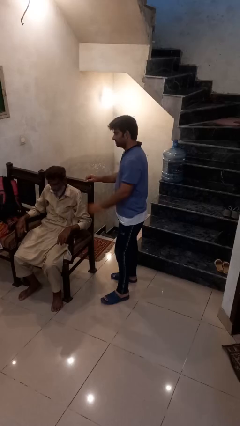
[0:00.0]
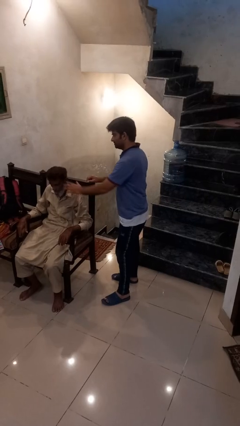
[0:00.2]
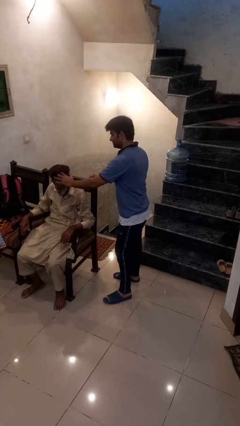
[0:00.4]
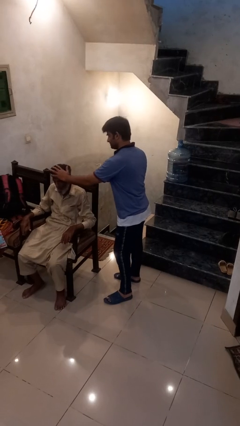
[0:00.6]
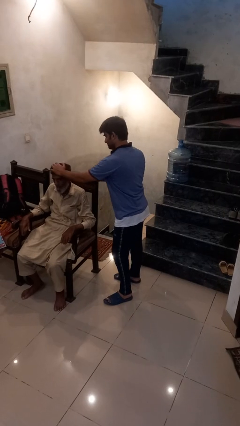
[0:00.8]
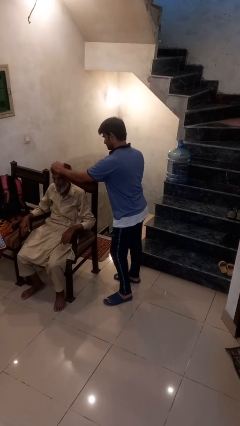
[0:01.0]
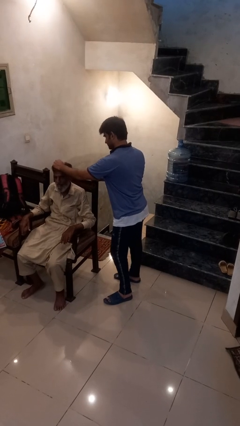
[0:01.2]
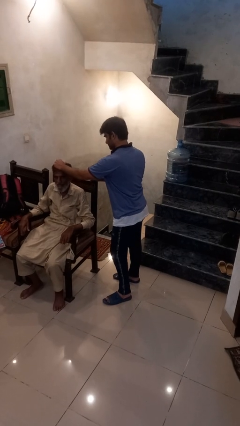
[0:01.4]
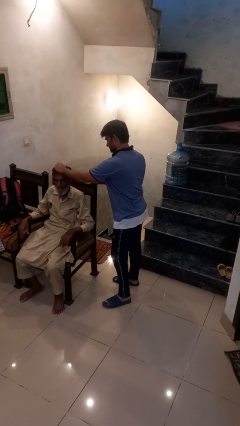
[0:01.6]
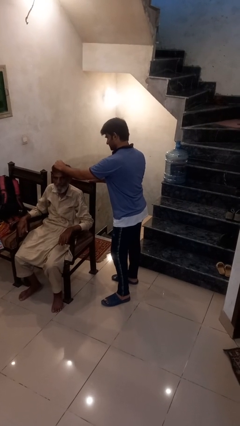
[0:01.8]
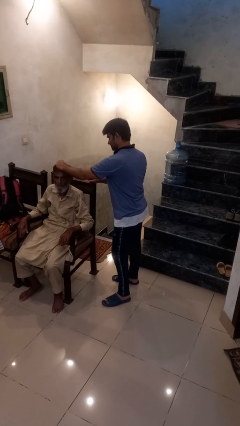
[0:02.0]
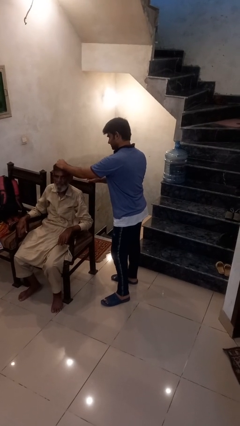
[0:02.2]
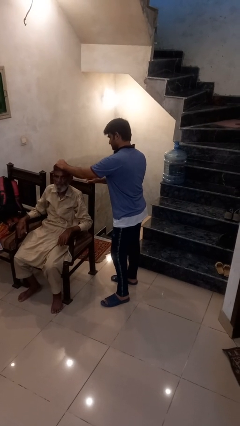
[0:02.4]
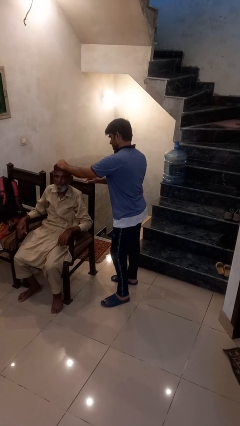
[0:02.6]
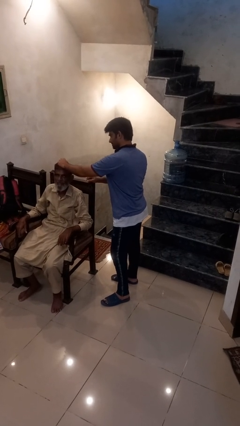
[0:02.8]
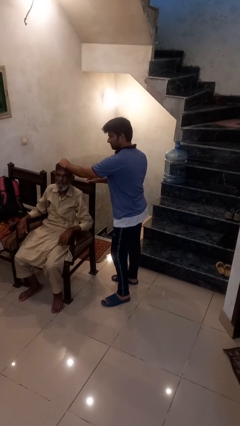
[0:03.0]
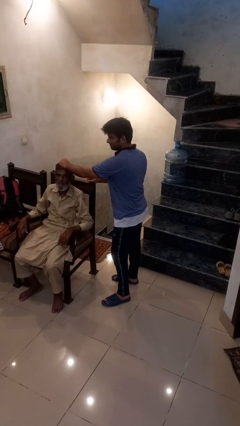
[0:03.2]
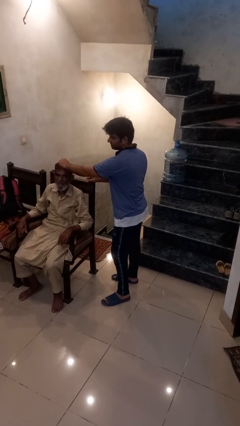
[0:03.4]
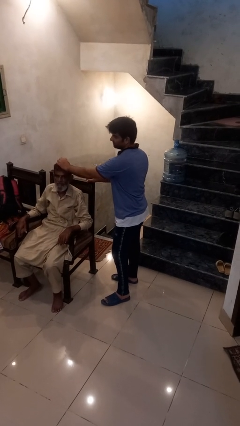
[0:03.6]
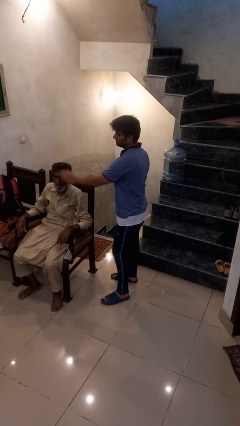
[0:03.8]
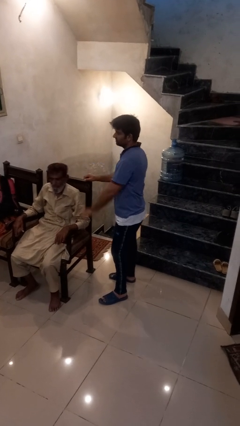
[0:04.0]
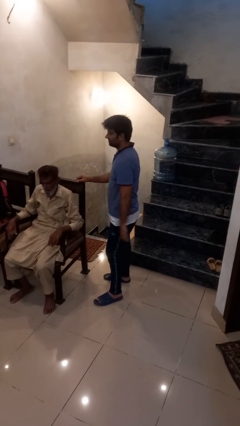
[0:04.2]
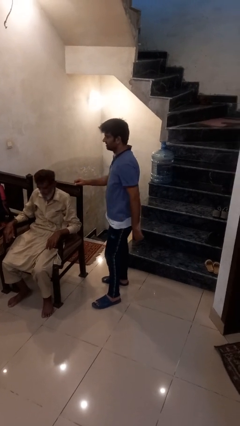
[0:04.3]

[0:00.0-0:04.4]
person grabs person by hair

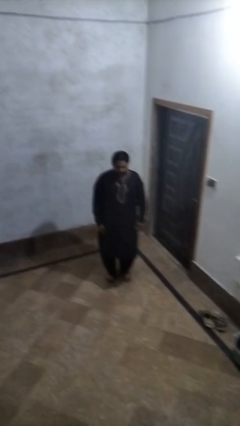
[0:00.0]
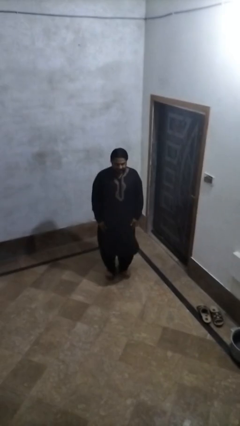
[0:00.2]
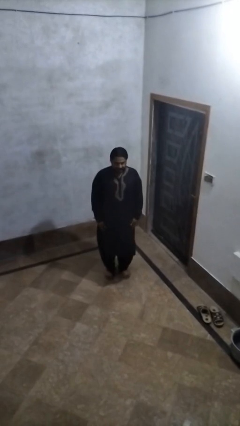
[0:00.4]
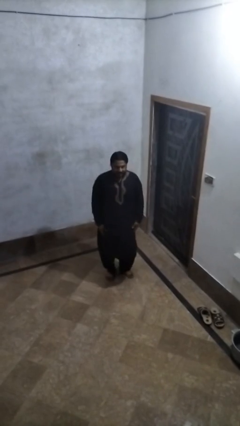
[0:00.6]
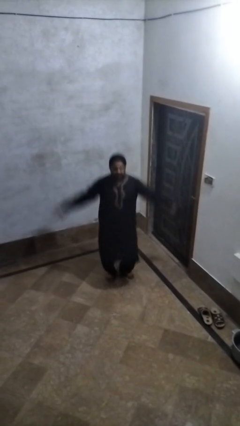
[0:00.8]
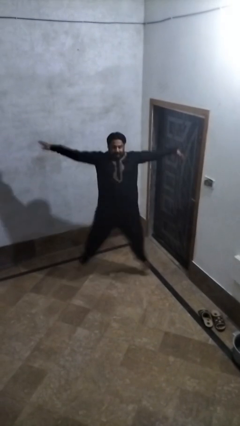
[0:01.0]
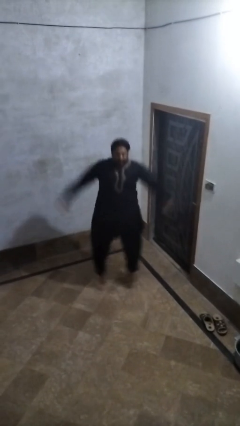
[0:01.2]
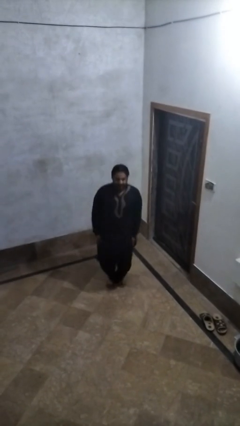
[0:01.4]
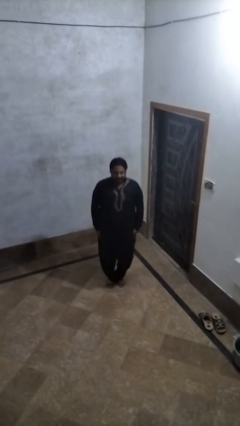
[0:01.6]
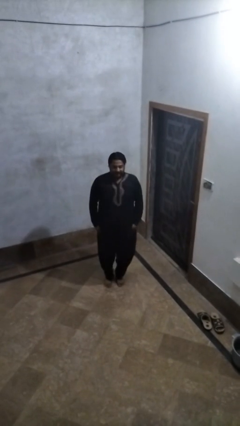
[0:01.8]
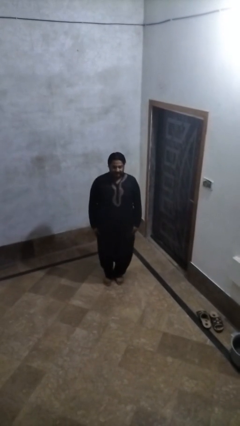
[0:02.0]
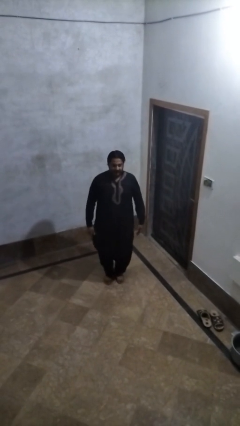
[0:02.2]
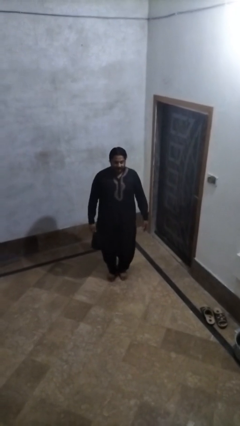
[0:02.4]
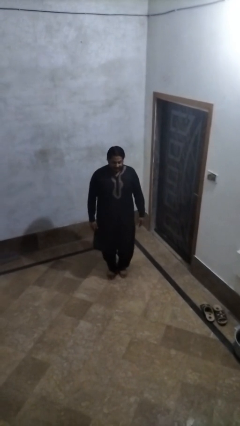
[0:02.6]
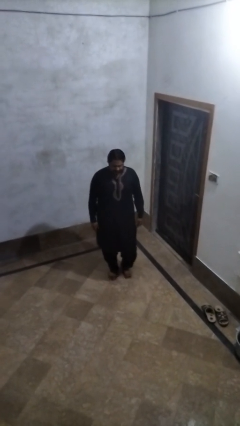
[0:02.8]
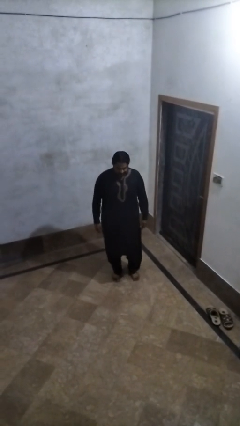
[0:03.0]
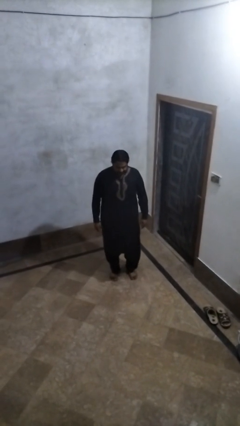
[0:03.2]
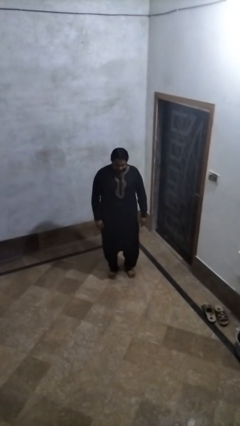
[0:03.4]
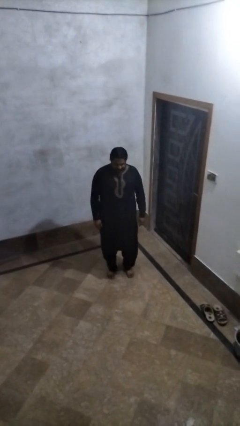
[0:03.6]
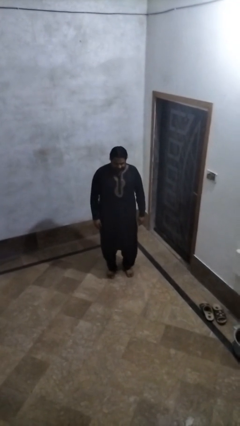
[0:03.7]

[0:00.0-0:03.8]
person exercises with jumping jacks

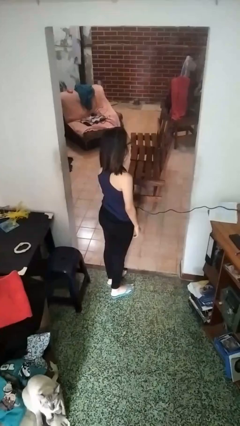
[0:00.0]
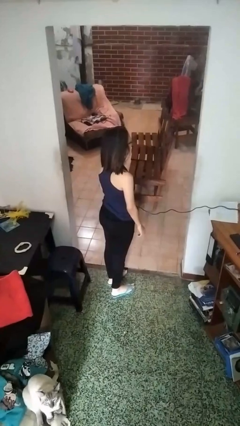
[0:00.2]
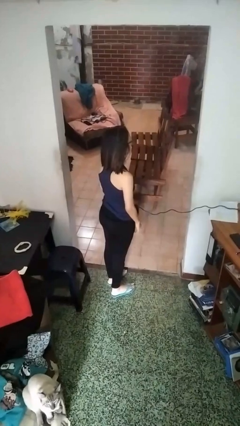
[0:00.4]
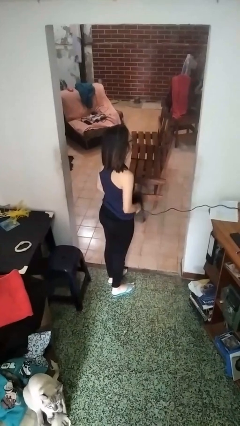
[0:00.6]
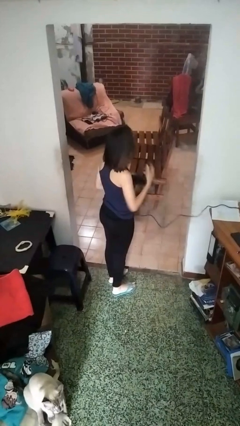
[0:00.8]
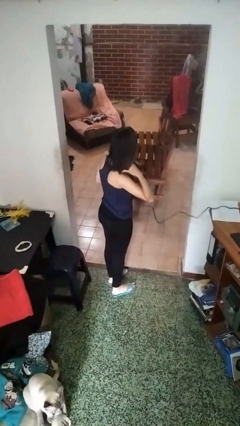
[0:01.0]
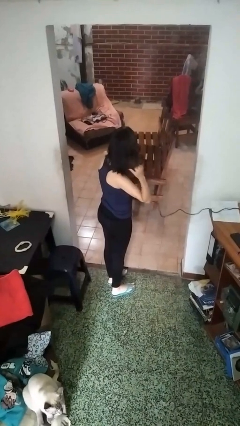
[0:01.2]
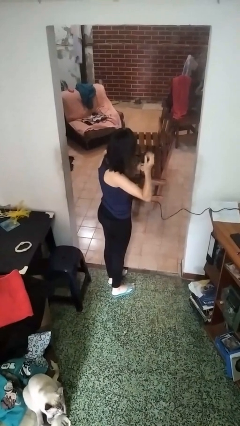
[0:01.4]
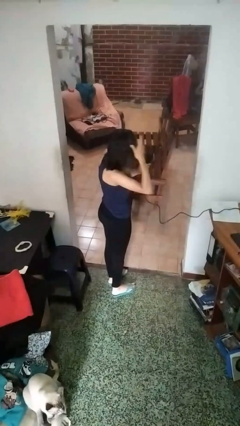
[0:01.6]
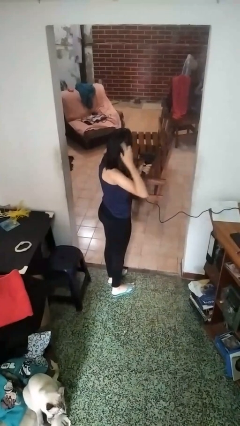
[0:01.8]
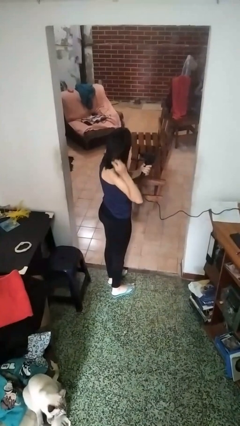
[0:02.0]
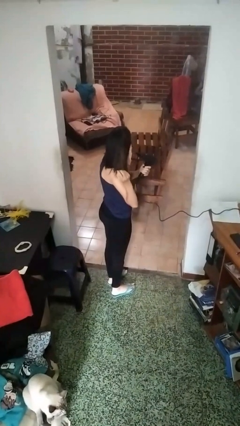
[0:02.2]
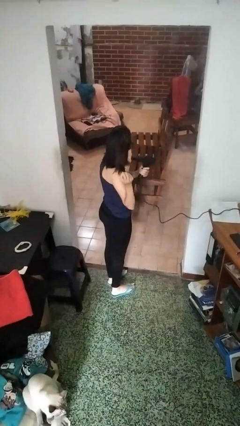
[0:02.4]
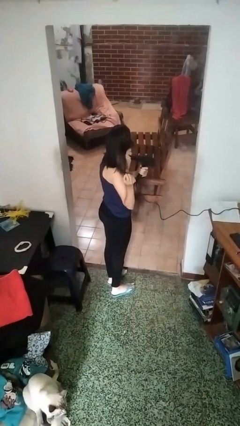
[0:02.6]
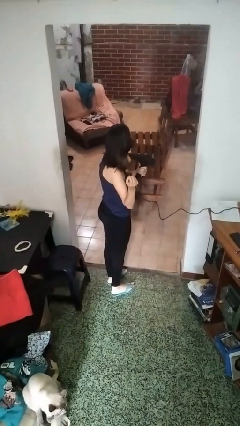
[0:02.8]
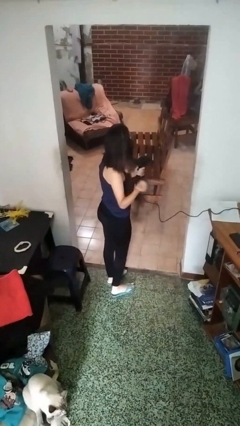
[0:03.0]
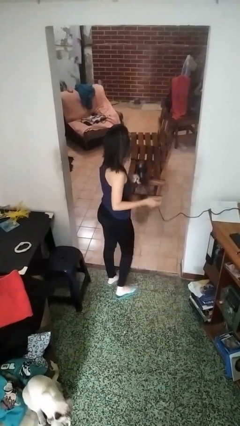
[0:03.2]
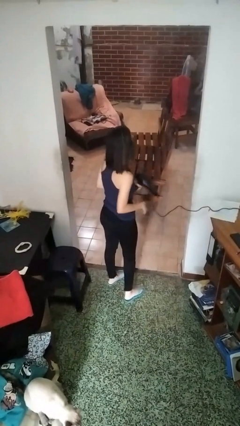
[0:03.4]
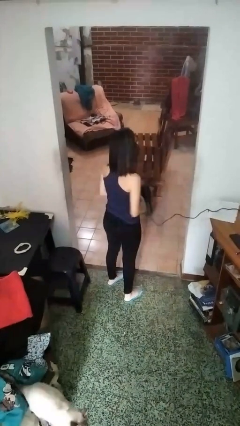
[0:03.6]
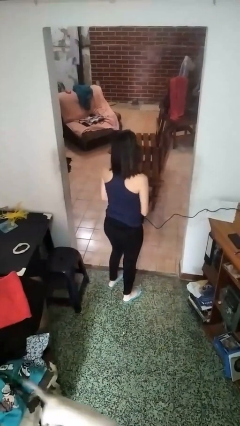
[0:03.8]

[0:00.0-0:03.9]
person dries hair with hairdryer

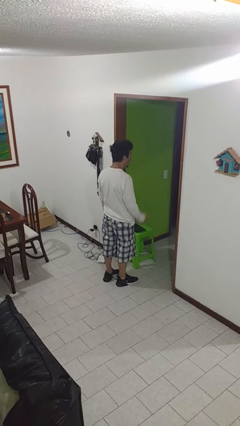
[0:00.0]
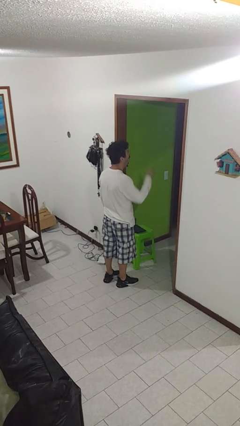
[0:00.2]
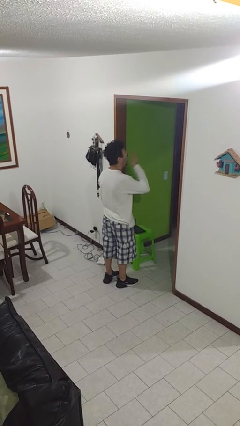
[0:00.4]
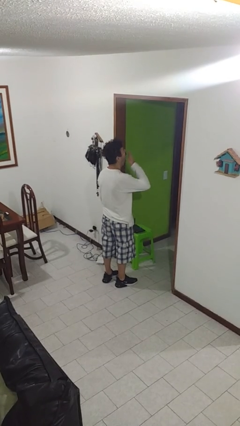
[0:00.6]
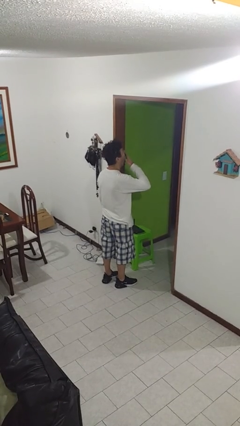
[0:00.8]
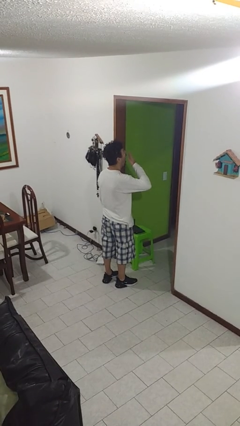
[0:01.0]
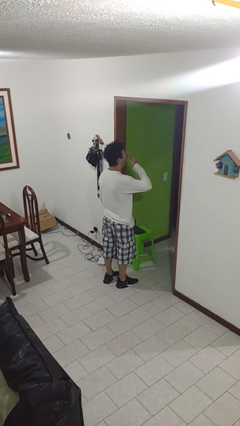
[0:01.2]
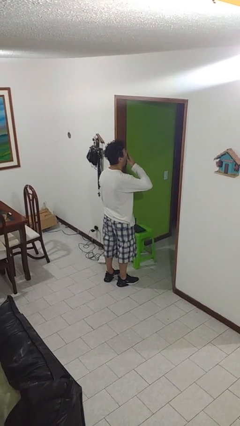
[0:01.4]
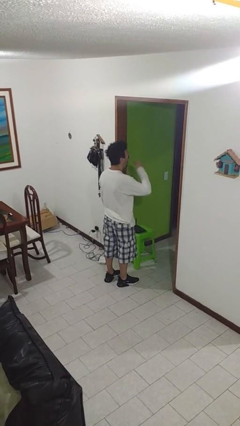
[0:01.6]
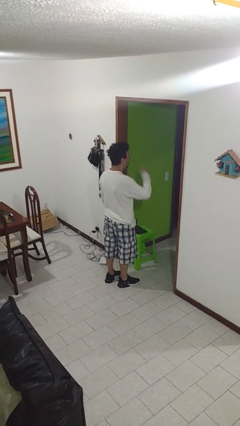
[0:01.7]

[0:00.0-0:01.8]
person yawns

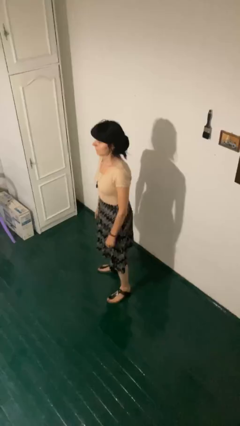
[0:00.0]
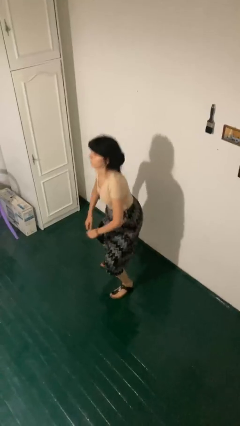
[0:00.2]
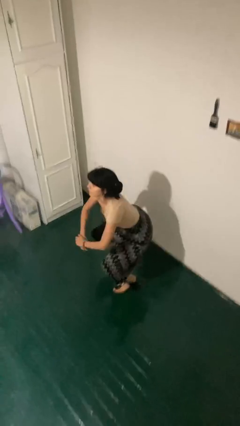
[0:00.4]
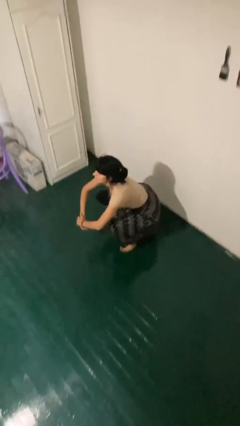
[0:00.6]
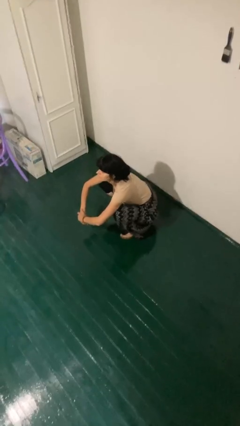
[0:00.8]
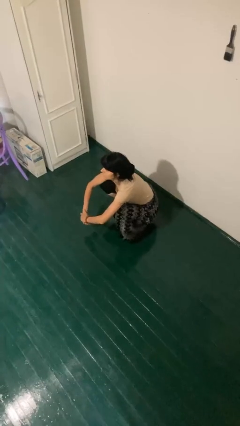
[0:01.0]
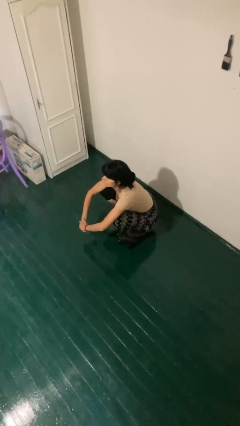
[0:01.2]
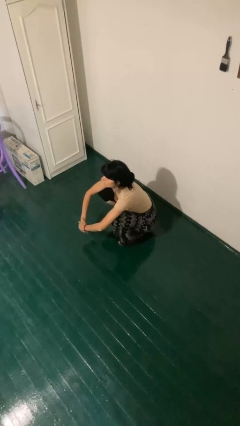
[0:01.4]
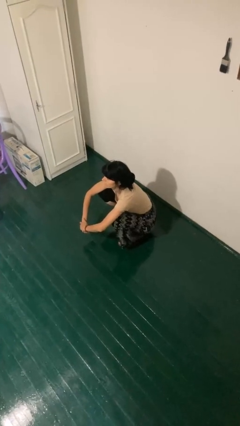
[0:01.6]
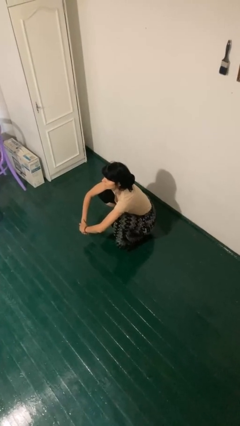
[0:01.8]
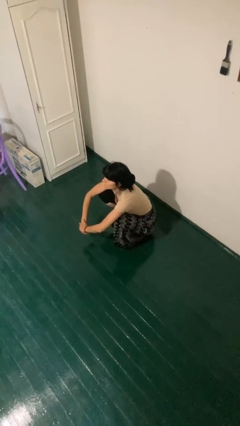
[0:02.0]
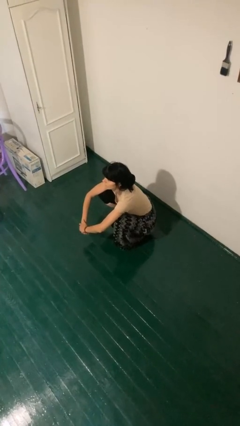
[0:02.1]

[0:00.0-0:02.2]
person squats

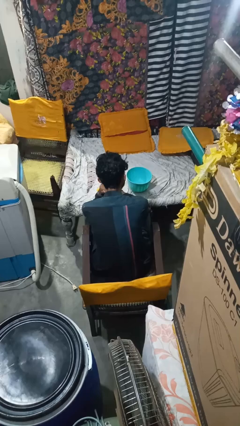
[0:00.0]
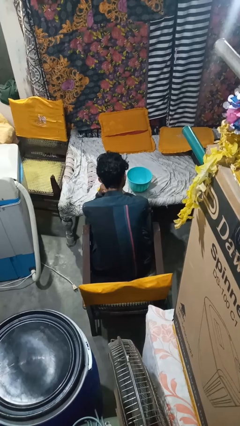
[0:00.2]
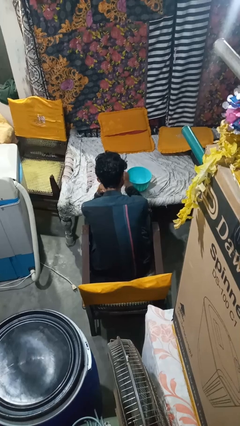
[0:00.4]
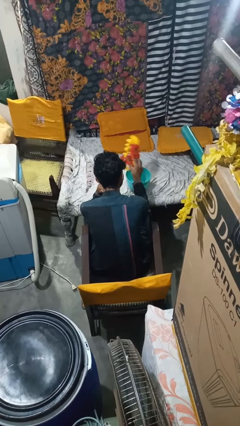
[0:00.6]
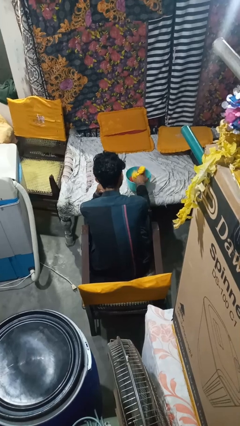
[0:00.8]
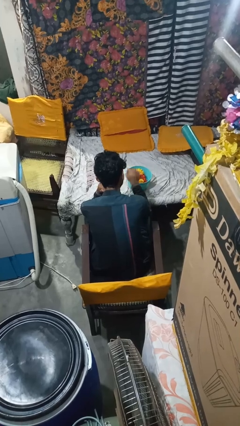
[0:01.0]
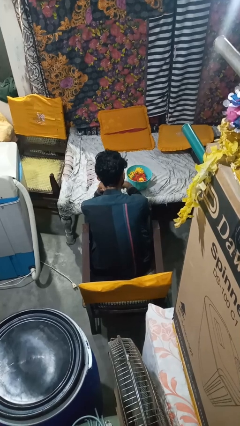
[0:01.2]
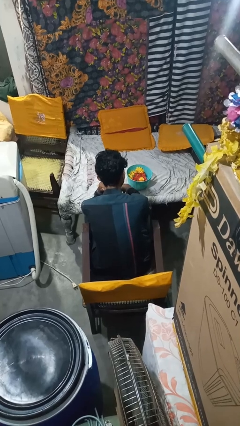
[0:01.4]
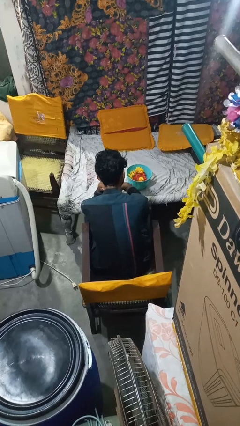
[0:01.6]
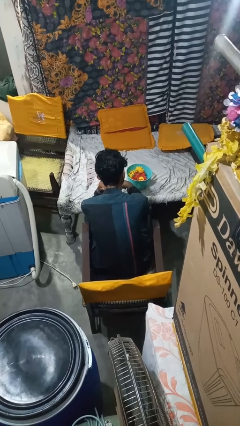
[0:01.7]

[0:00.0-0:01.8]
person pours into bowl
